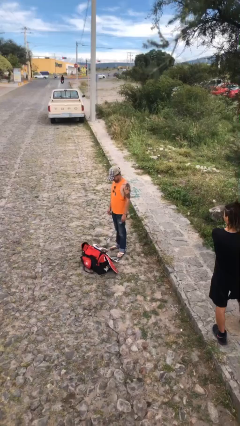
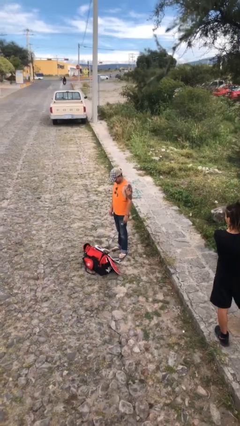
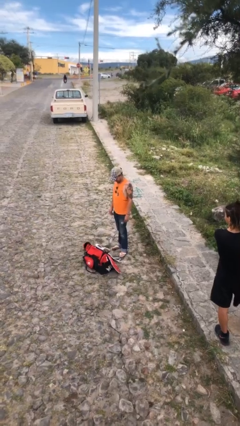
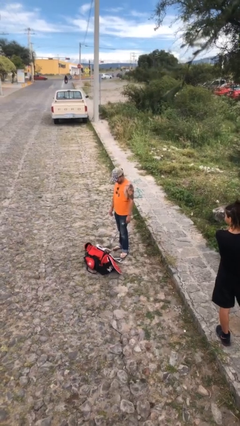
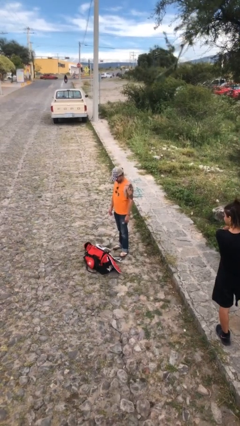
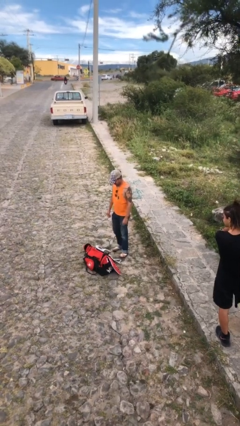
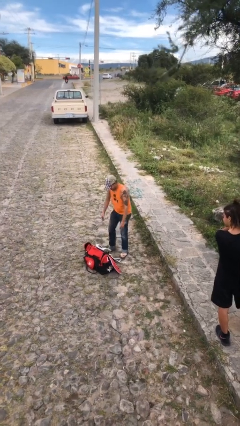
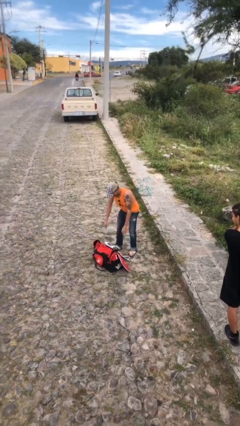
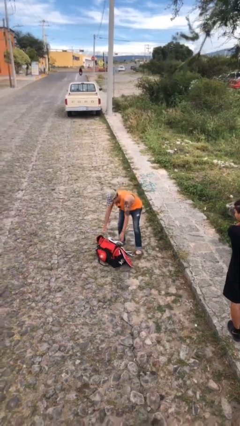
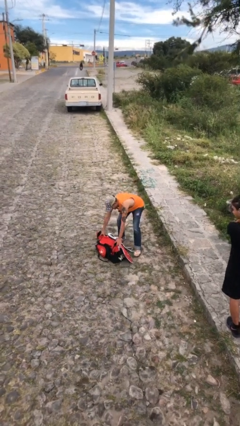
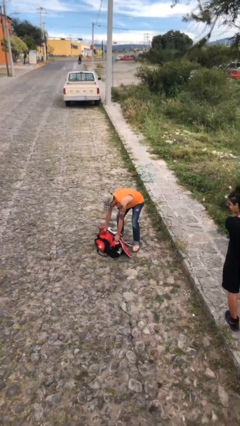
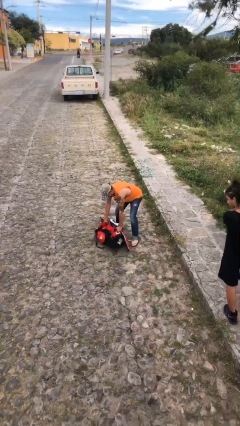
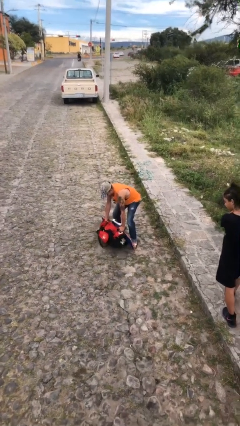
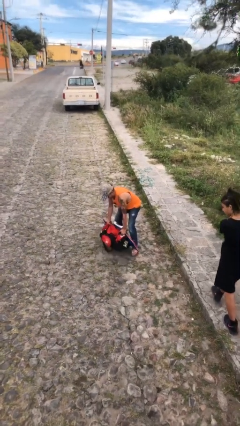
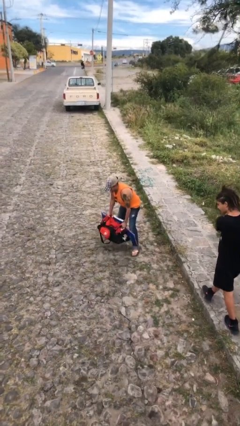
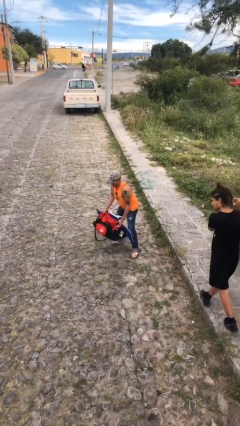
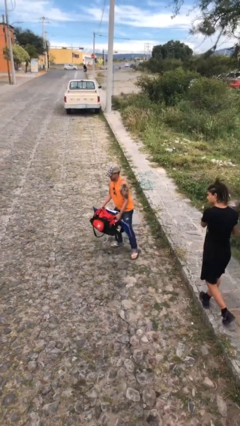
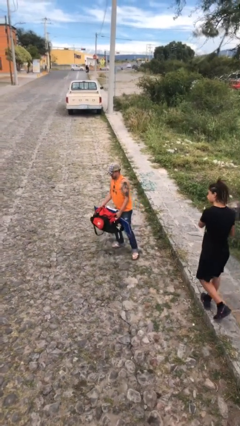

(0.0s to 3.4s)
person picks up object from floor

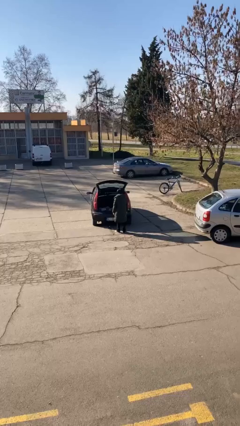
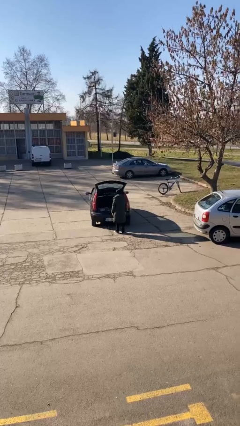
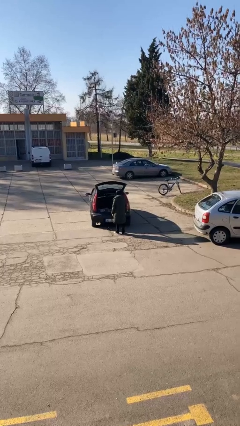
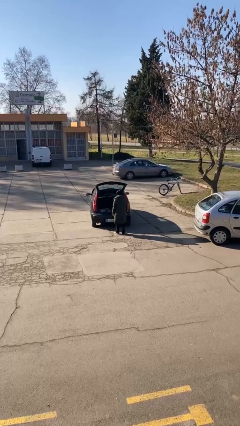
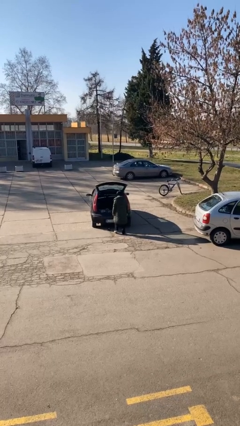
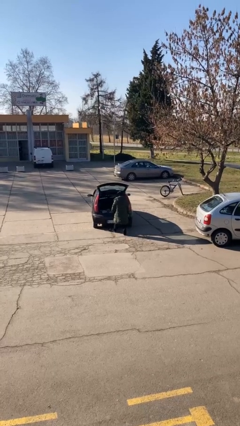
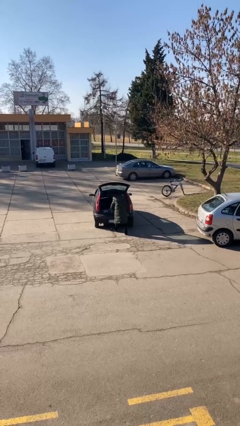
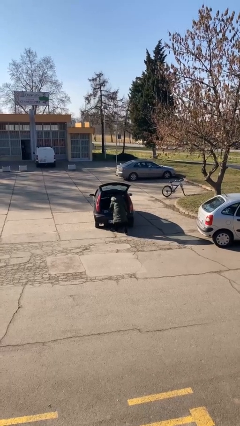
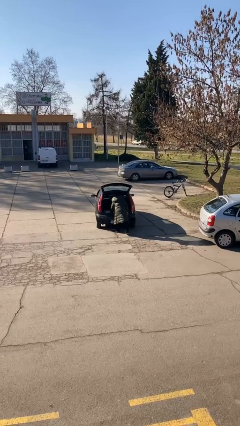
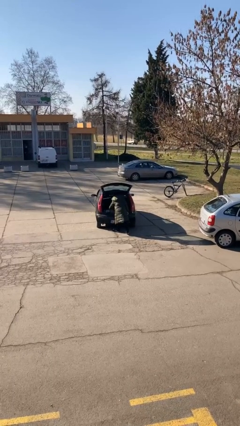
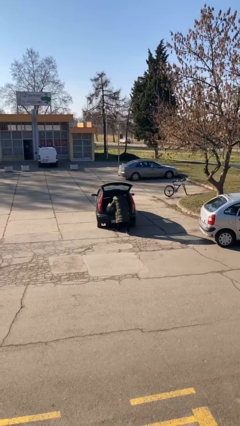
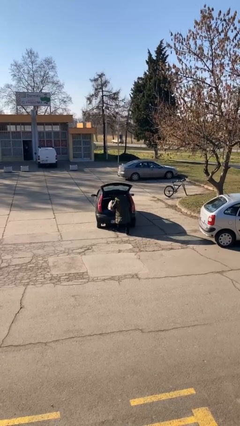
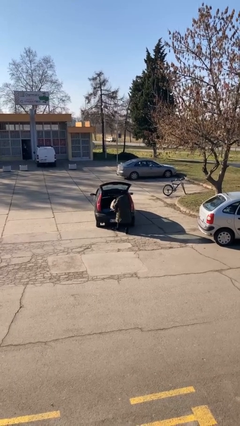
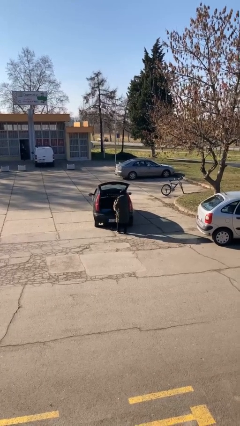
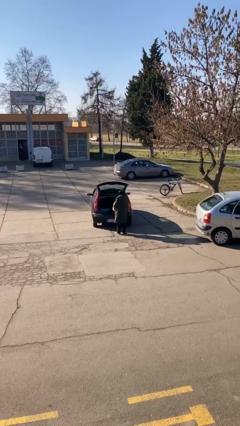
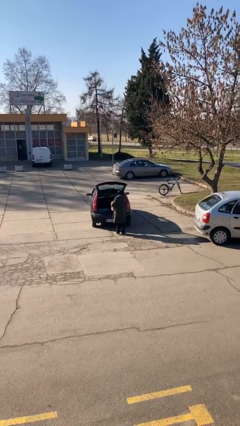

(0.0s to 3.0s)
person unloads car

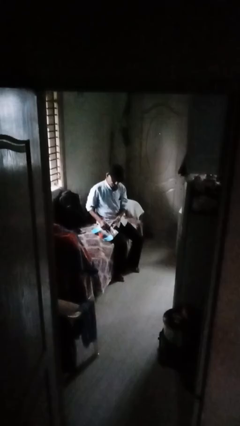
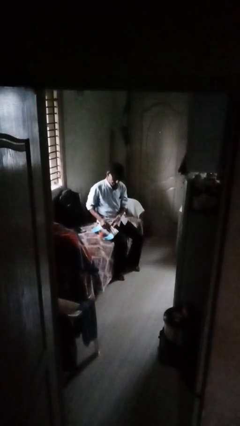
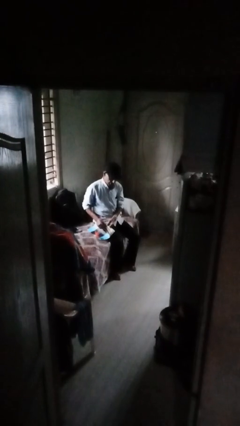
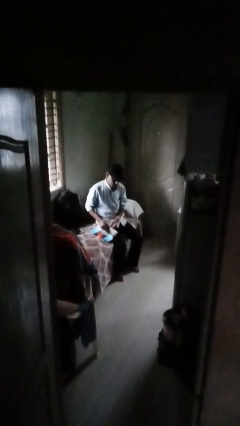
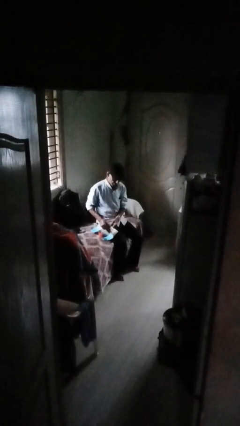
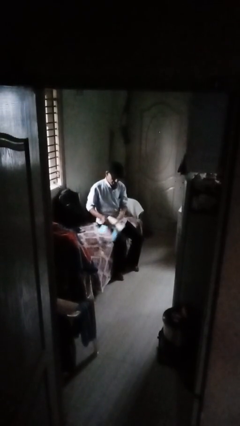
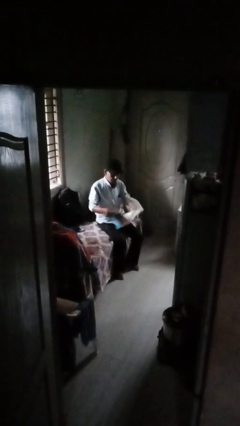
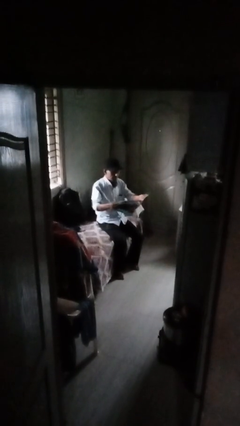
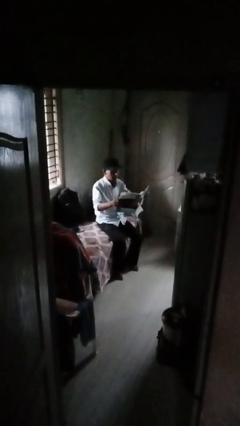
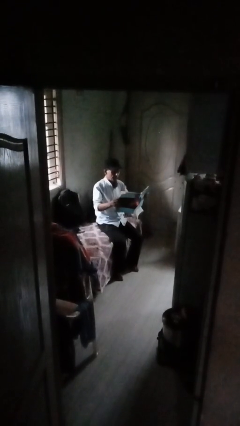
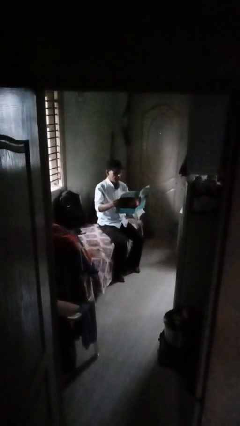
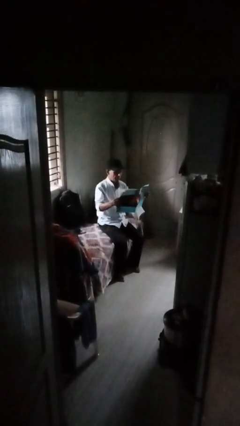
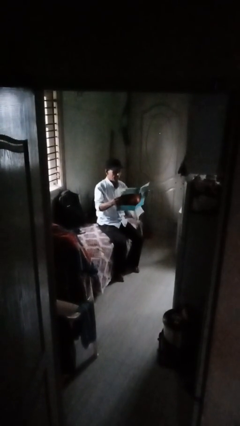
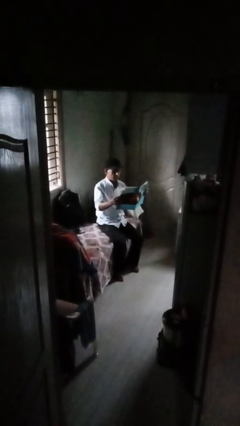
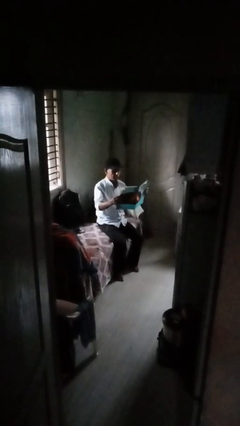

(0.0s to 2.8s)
person reads magazine

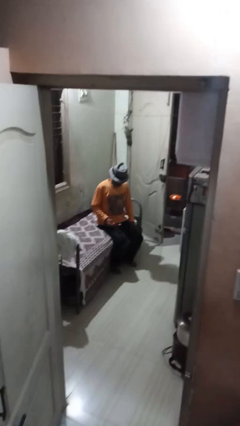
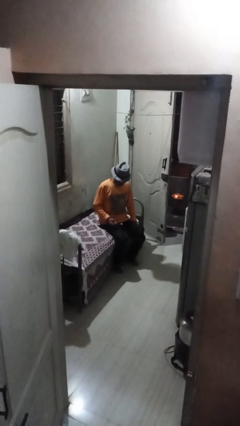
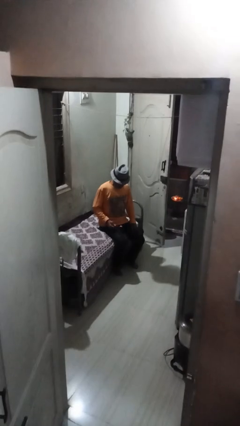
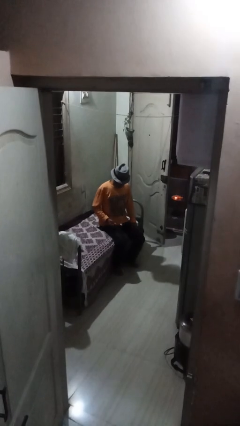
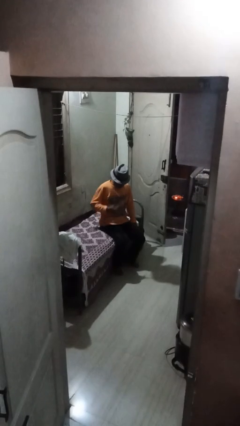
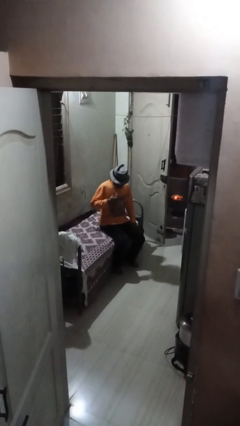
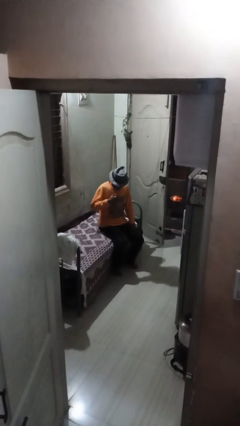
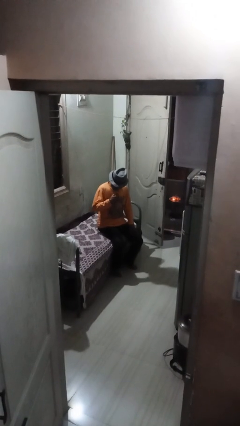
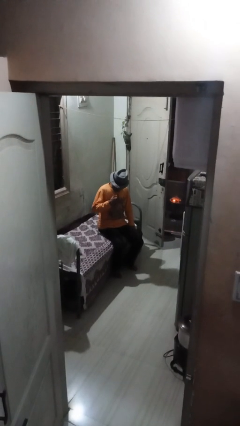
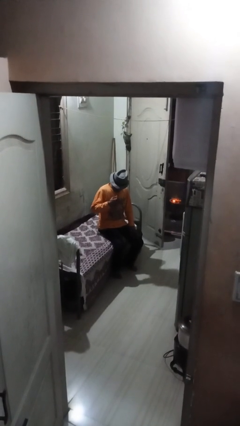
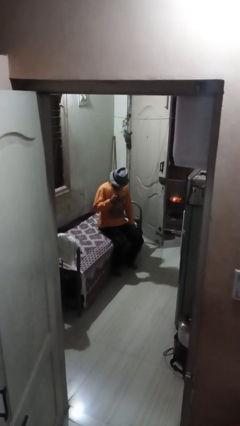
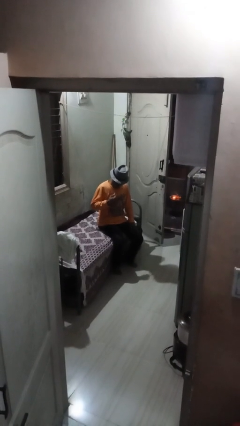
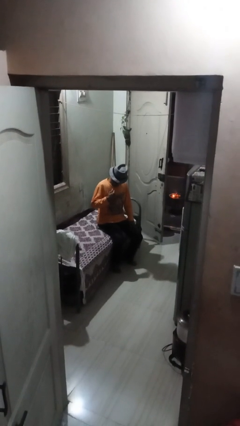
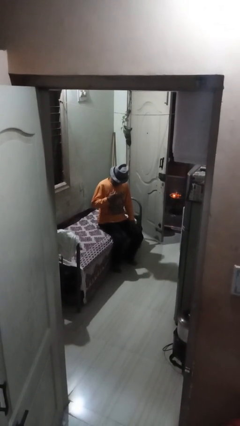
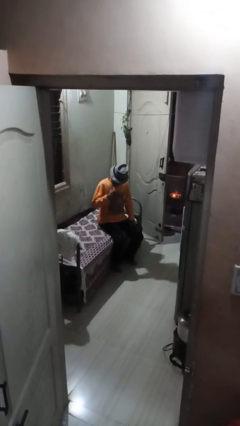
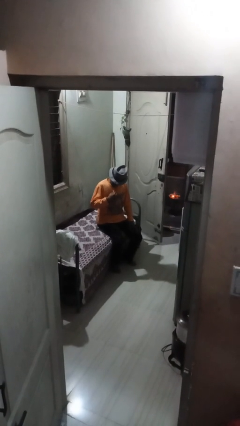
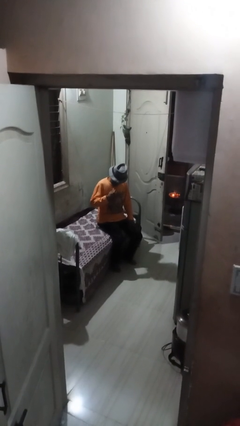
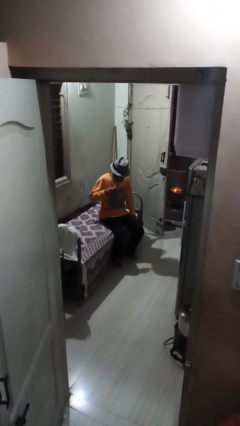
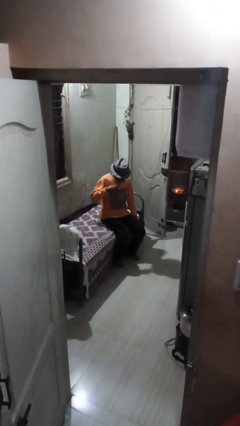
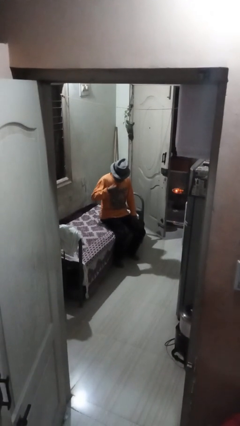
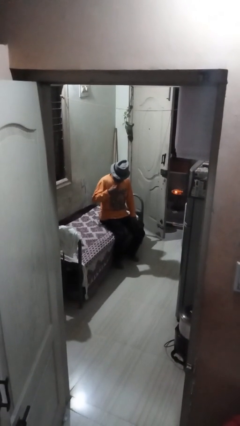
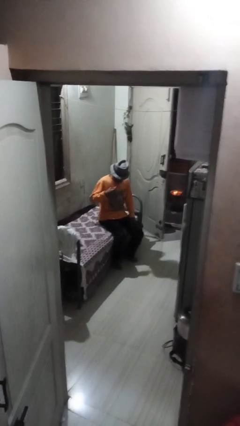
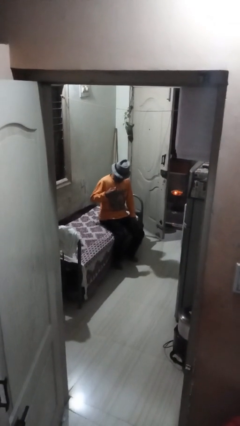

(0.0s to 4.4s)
person brushes teeth

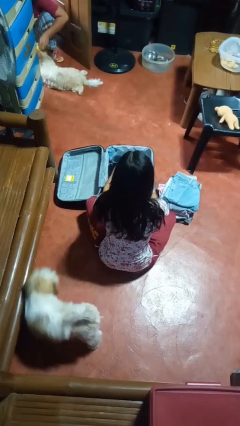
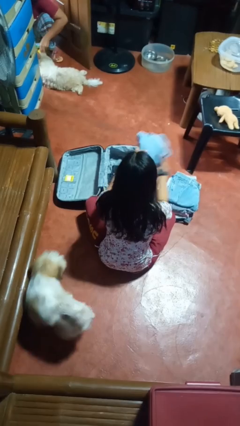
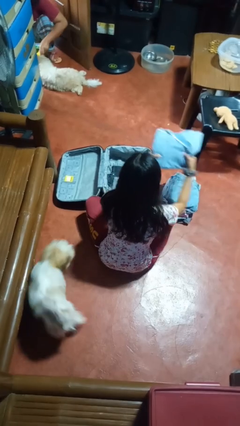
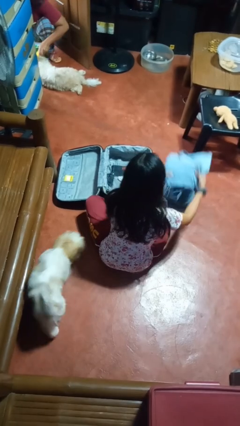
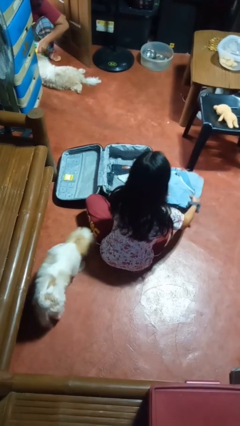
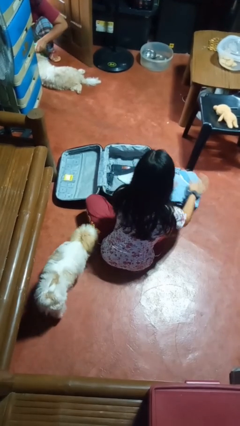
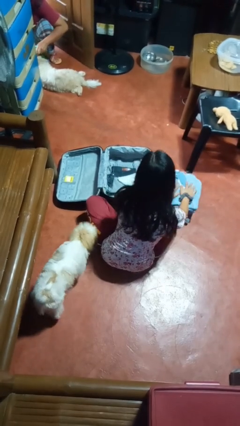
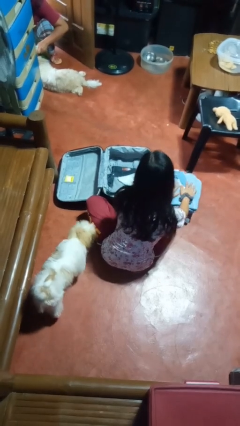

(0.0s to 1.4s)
person unloads clothes from suitcase

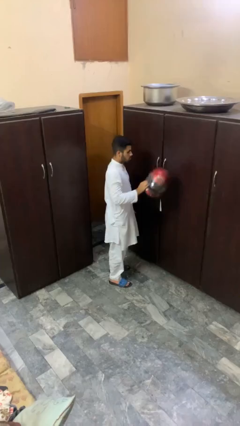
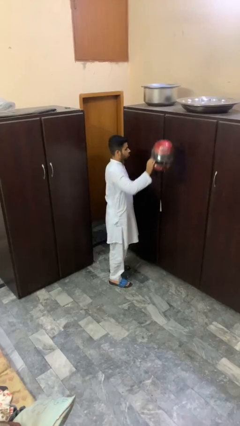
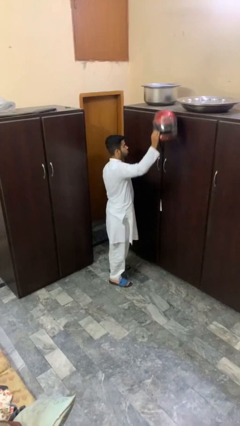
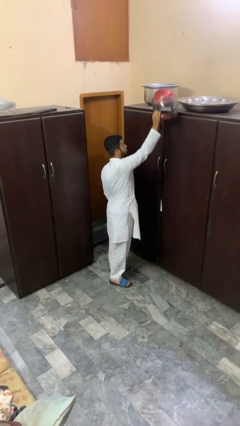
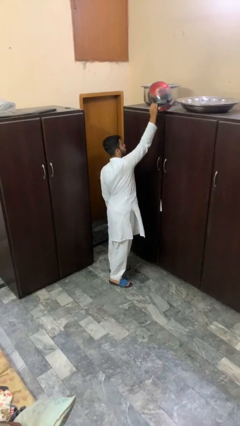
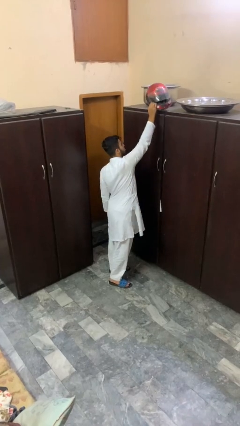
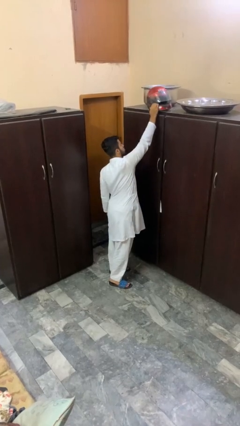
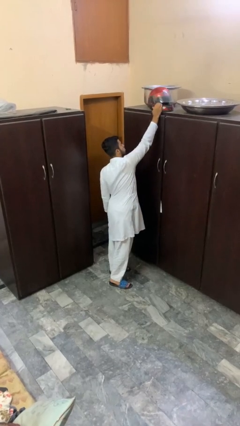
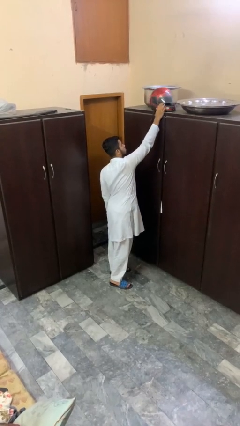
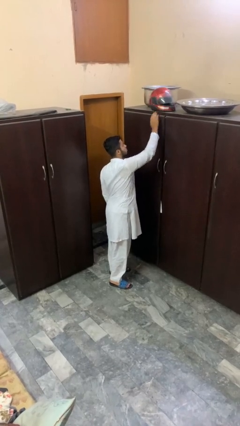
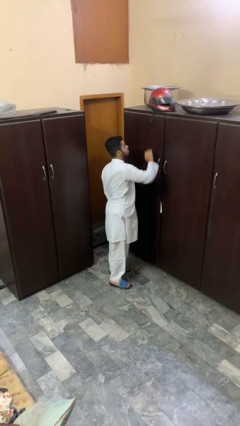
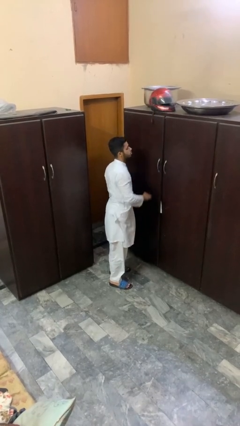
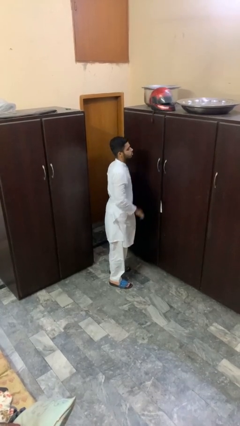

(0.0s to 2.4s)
person puts down object on shelf

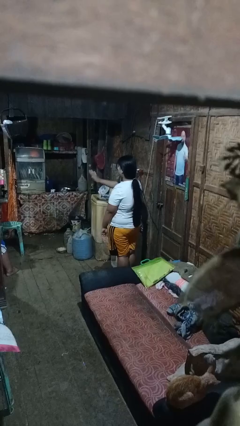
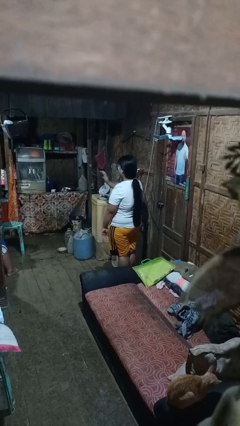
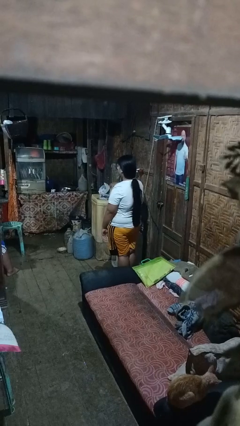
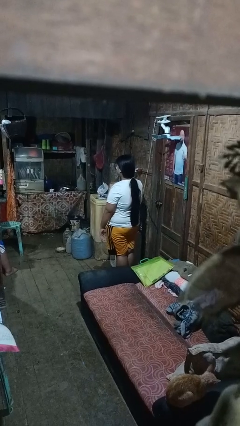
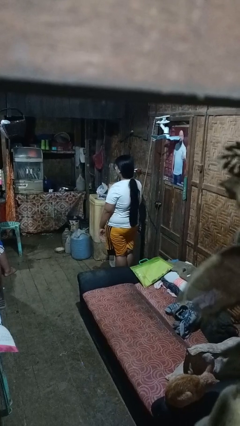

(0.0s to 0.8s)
person gestures stop
